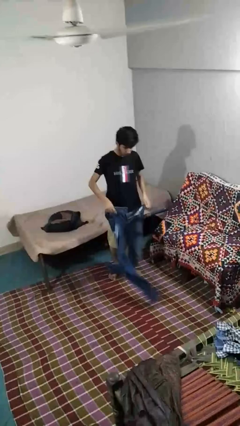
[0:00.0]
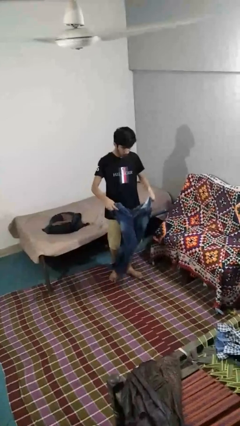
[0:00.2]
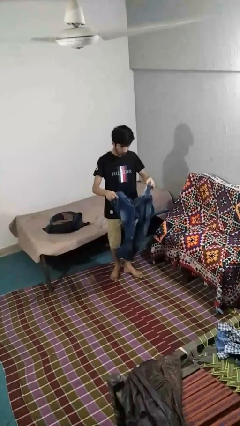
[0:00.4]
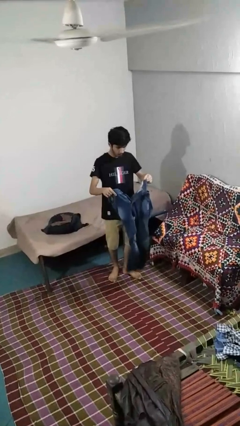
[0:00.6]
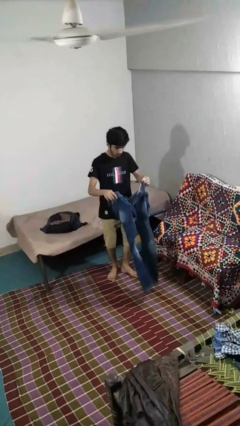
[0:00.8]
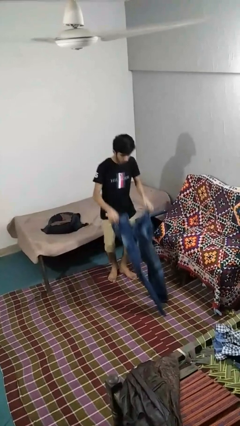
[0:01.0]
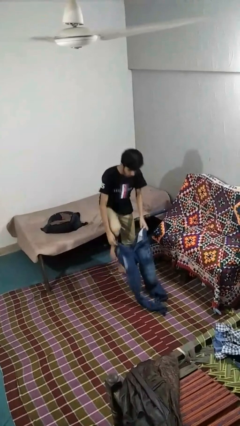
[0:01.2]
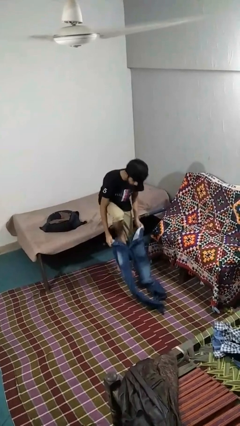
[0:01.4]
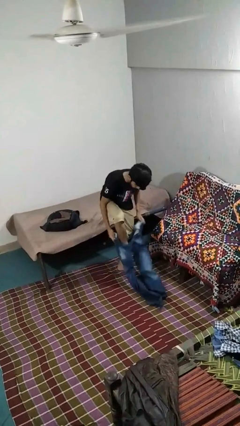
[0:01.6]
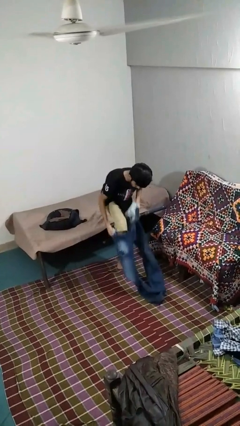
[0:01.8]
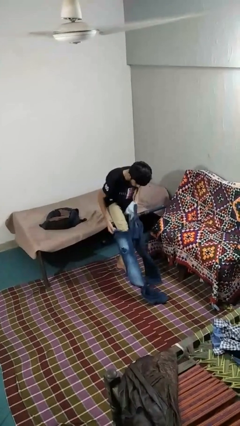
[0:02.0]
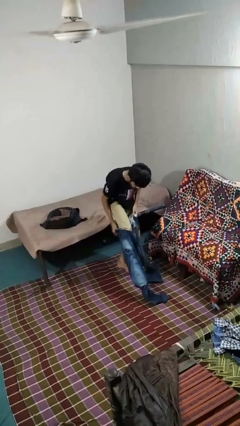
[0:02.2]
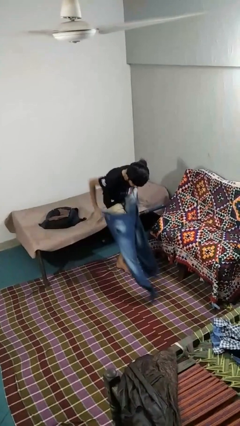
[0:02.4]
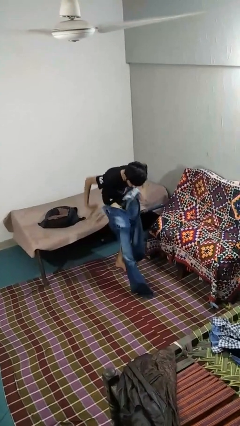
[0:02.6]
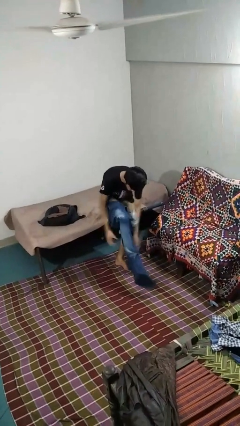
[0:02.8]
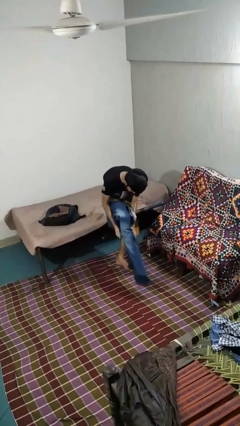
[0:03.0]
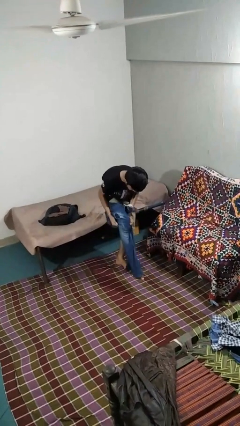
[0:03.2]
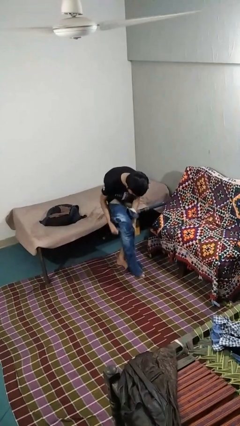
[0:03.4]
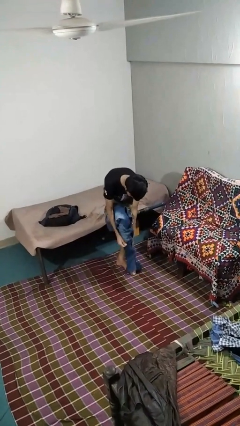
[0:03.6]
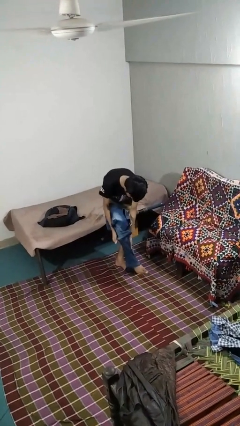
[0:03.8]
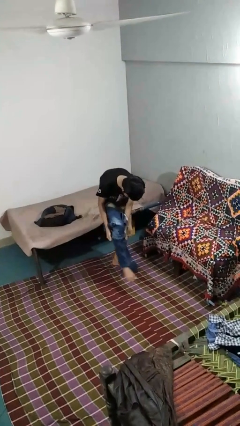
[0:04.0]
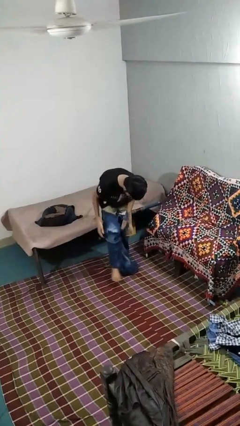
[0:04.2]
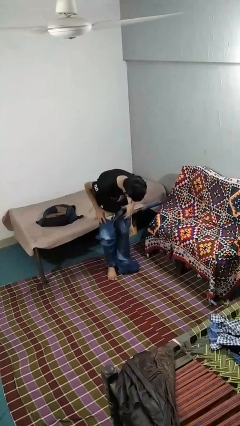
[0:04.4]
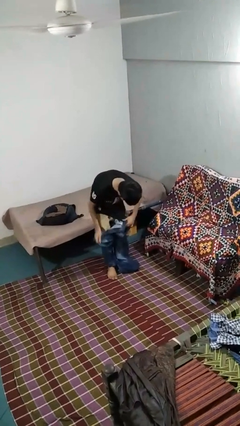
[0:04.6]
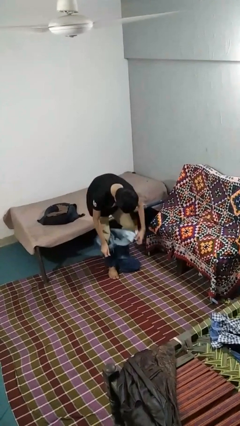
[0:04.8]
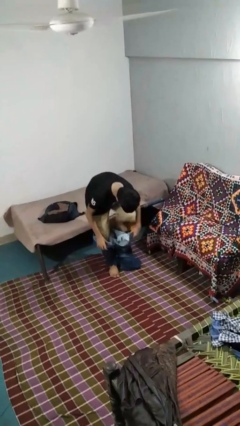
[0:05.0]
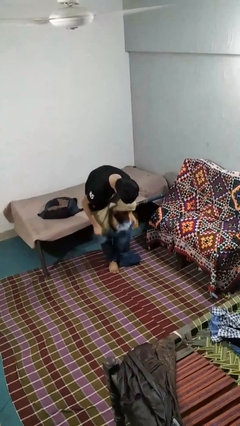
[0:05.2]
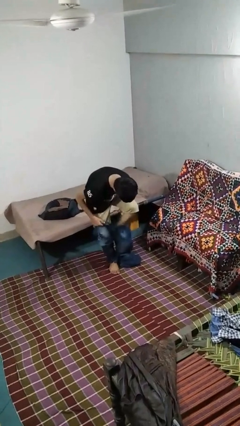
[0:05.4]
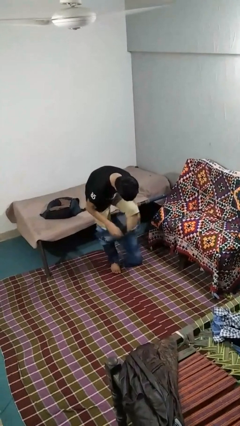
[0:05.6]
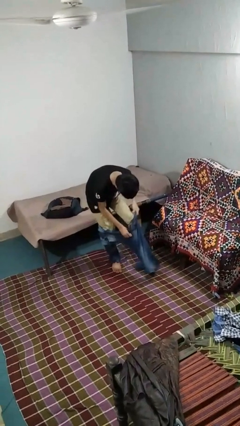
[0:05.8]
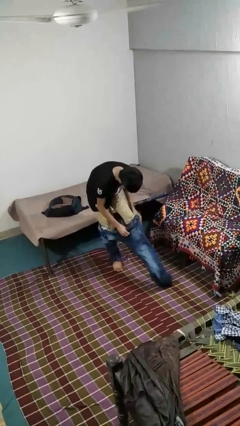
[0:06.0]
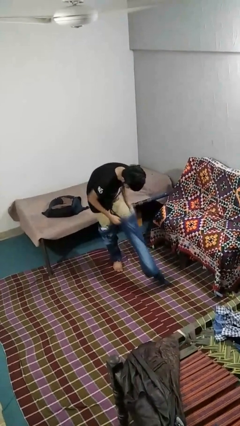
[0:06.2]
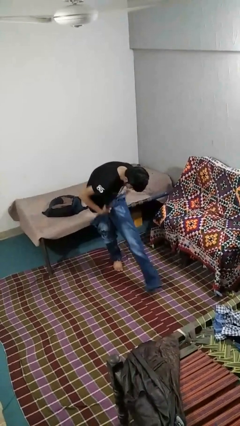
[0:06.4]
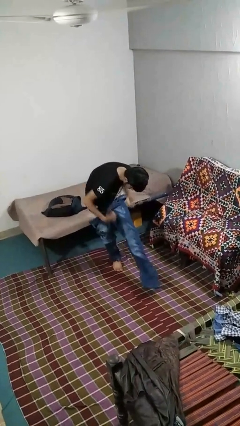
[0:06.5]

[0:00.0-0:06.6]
person puts on pants

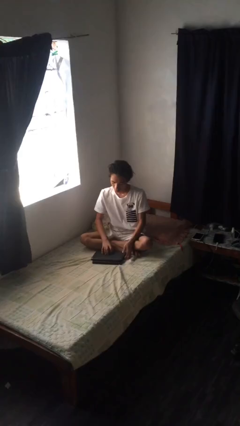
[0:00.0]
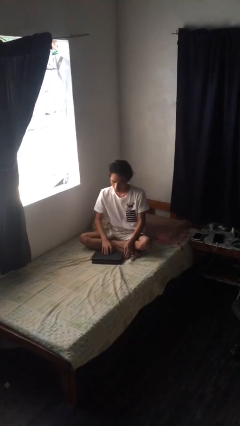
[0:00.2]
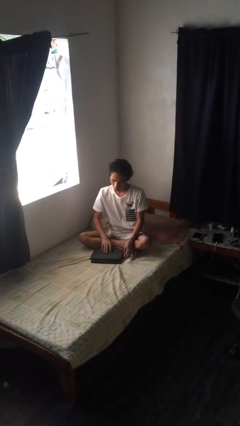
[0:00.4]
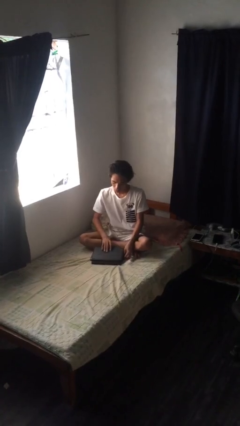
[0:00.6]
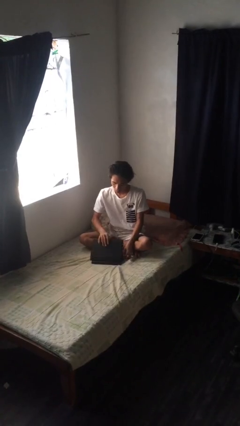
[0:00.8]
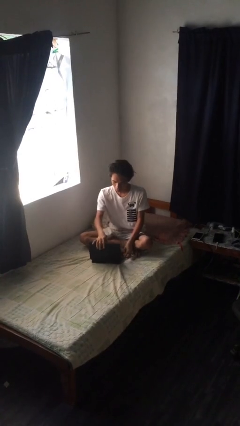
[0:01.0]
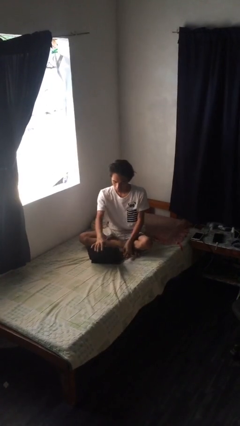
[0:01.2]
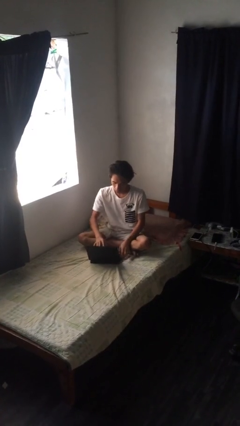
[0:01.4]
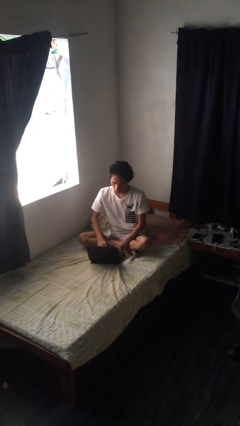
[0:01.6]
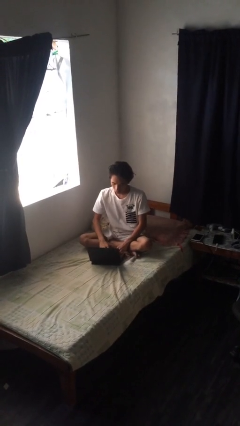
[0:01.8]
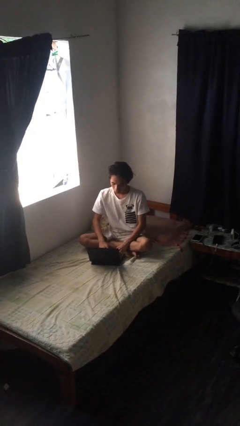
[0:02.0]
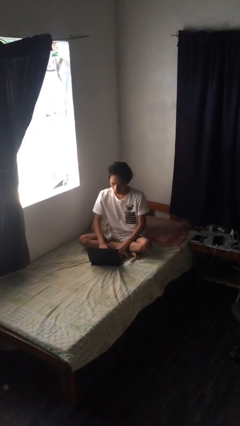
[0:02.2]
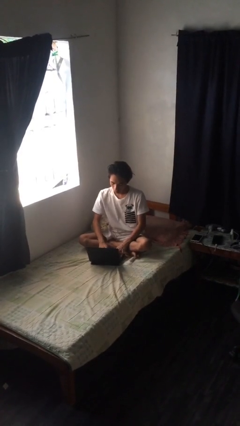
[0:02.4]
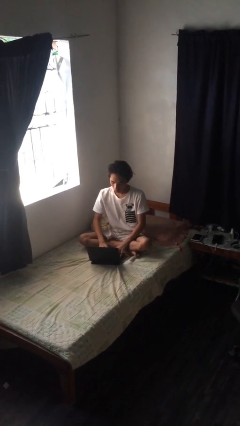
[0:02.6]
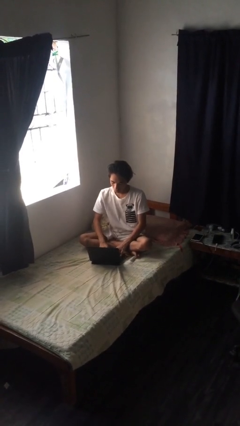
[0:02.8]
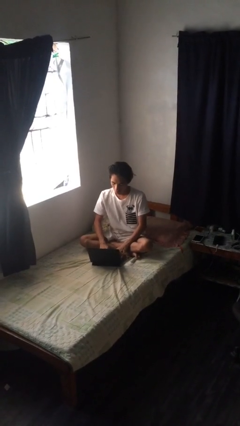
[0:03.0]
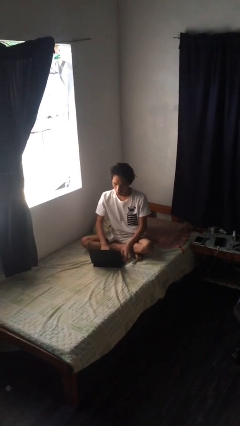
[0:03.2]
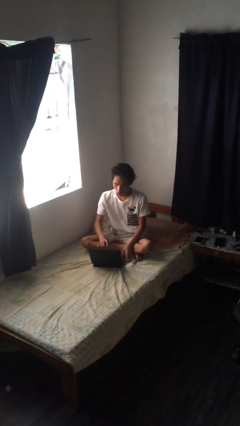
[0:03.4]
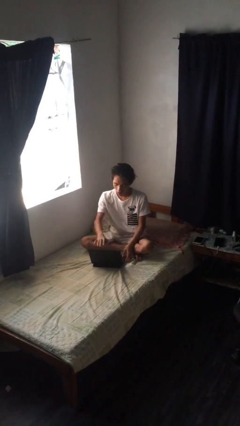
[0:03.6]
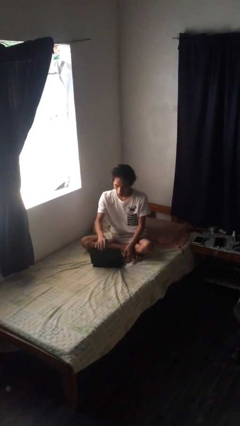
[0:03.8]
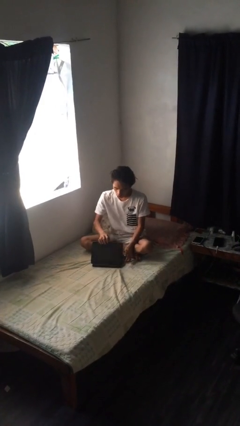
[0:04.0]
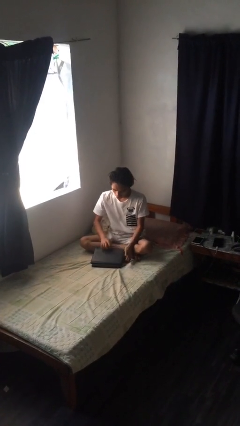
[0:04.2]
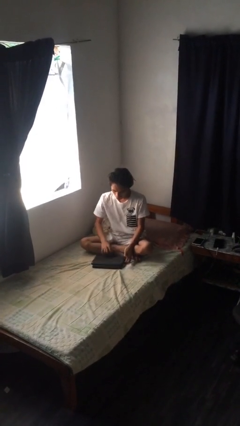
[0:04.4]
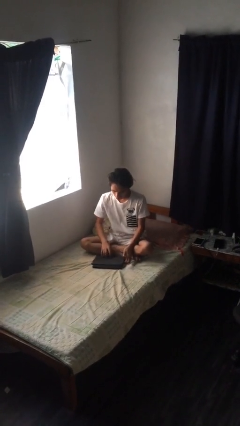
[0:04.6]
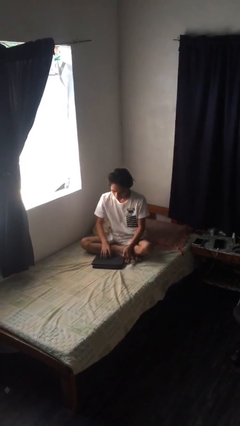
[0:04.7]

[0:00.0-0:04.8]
person interacts with laptop

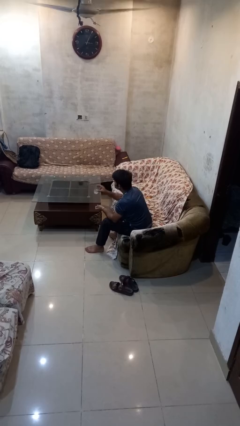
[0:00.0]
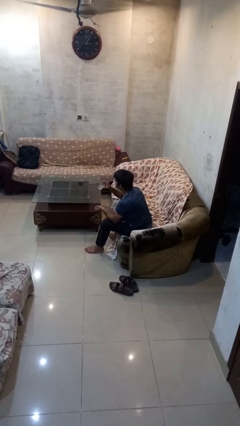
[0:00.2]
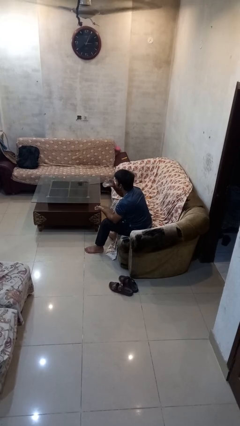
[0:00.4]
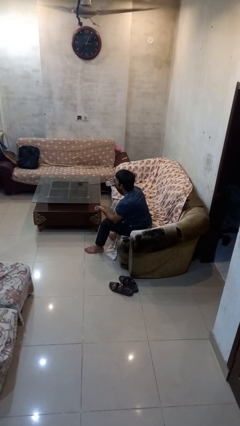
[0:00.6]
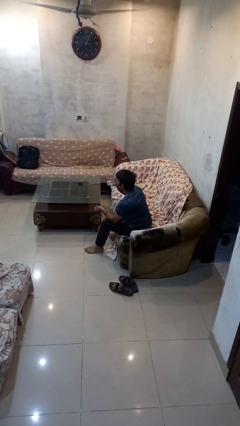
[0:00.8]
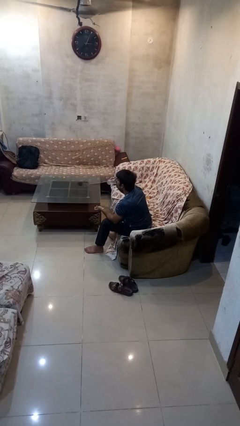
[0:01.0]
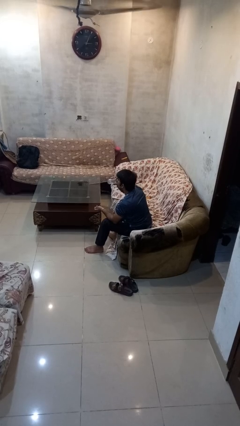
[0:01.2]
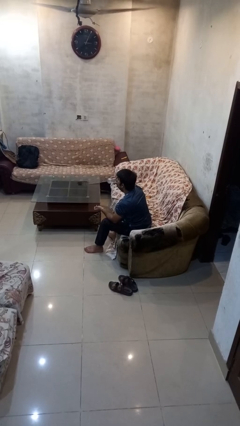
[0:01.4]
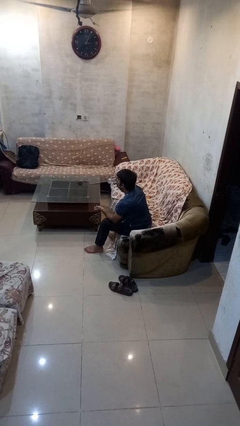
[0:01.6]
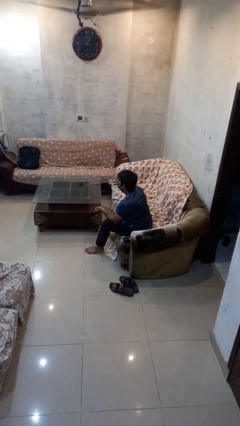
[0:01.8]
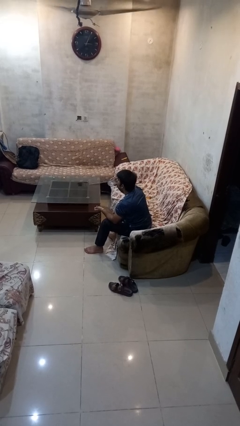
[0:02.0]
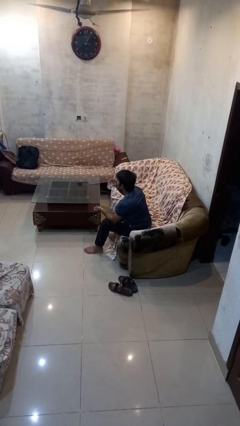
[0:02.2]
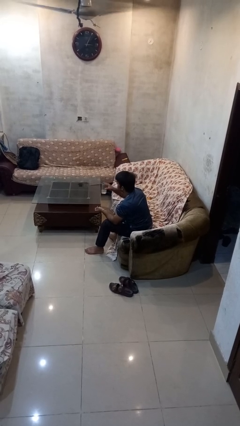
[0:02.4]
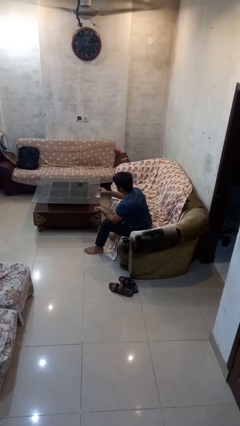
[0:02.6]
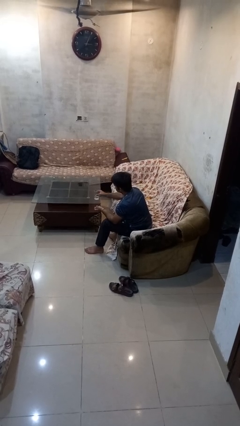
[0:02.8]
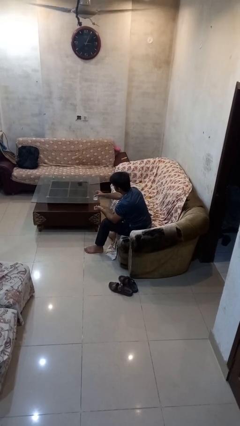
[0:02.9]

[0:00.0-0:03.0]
person drinks from cup

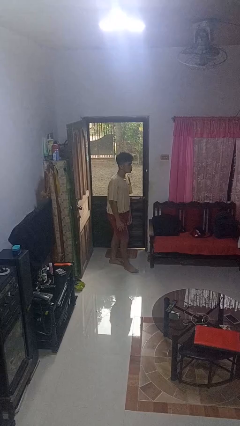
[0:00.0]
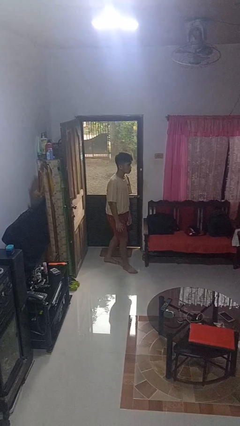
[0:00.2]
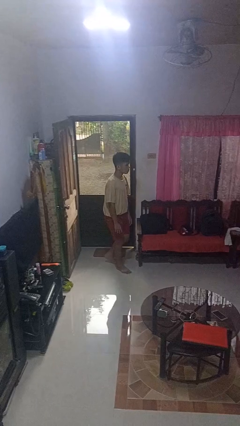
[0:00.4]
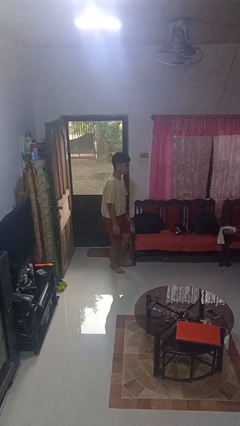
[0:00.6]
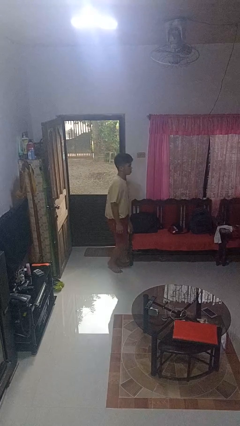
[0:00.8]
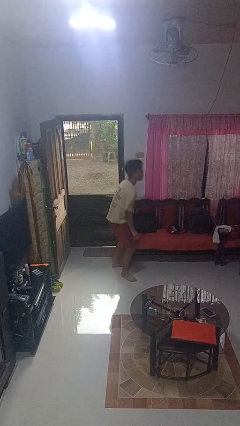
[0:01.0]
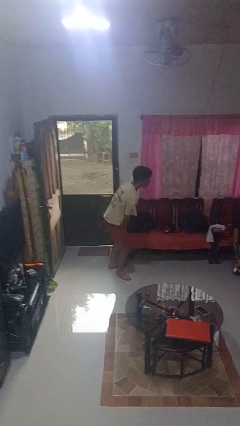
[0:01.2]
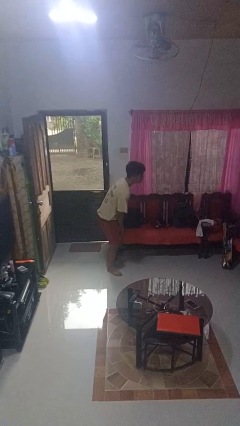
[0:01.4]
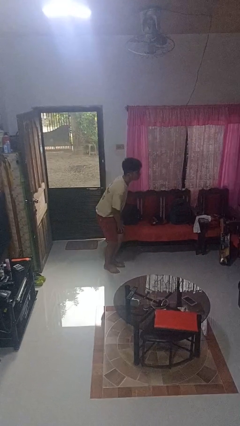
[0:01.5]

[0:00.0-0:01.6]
person trips on object on floor

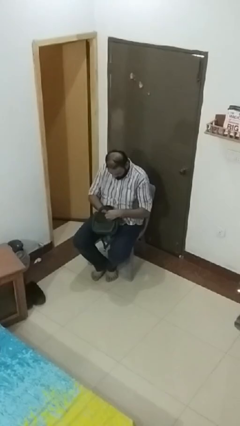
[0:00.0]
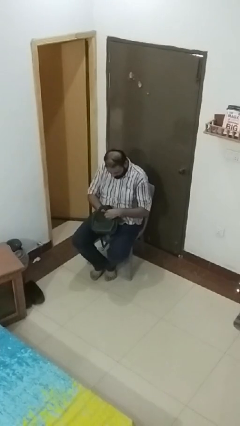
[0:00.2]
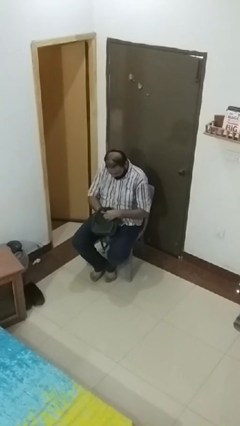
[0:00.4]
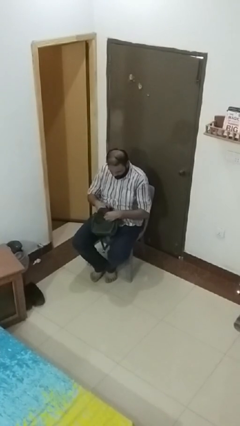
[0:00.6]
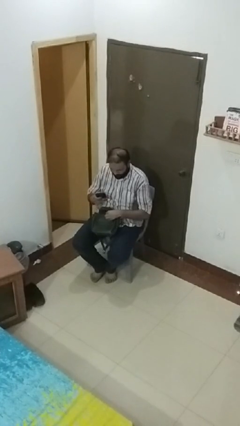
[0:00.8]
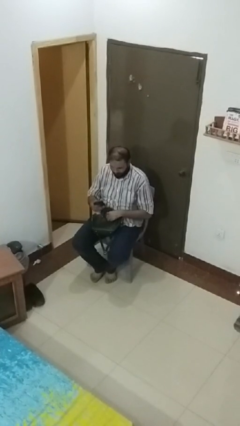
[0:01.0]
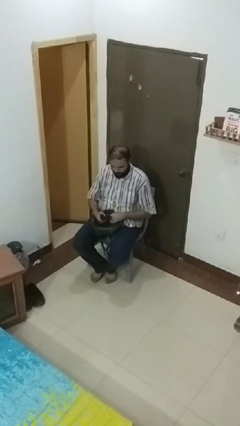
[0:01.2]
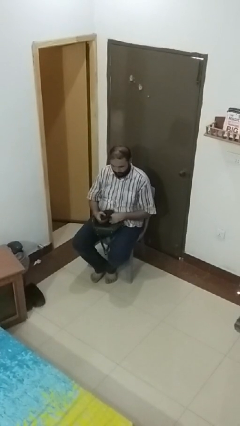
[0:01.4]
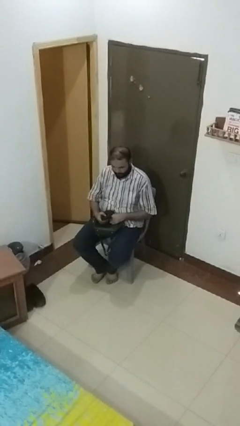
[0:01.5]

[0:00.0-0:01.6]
person takes object from purse
